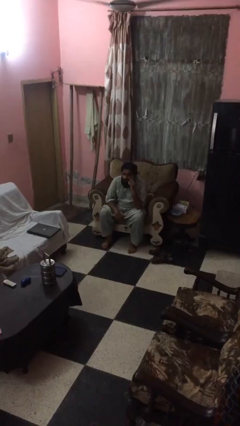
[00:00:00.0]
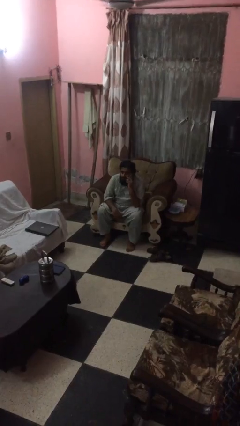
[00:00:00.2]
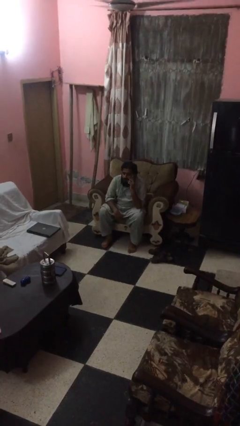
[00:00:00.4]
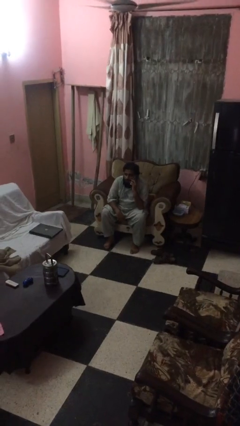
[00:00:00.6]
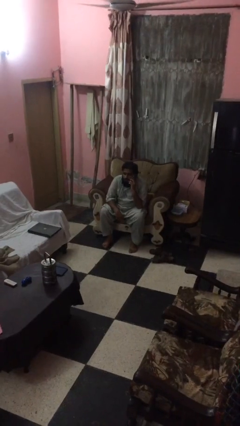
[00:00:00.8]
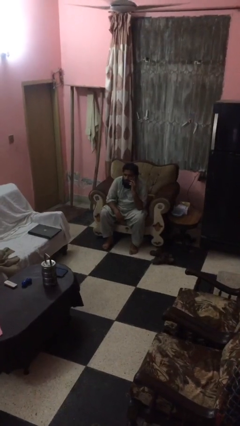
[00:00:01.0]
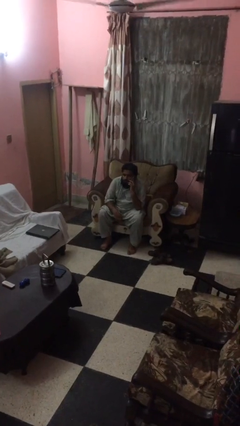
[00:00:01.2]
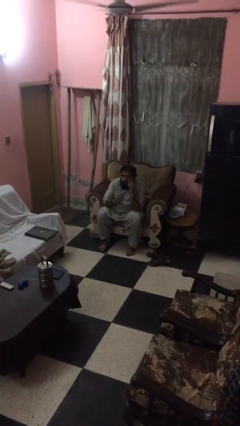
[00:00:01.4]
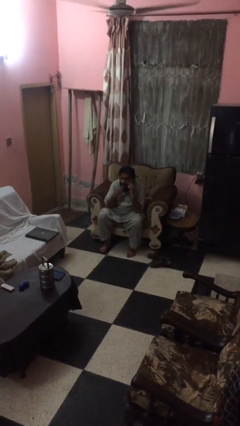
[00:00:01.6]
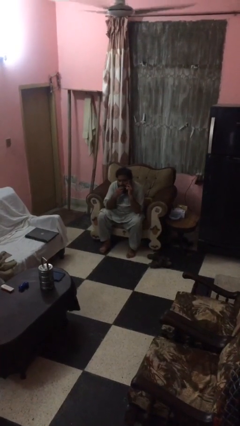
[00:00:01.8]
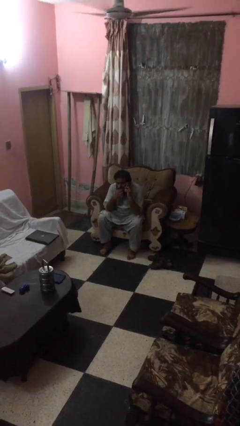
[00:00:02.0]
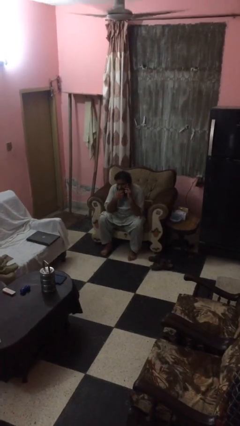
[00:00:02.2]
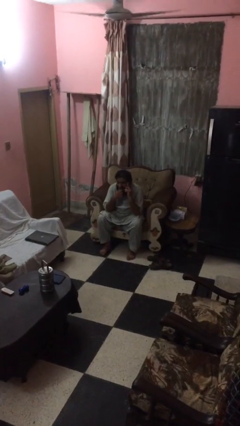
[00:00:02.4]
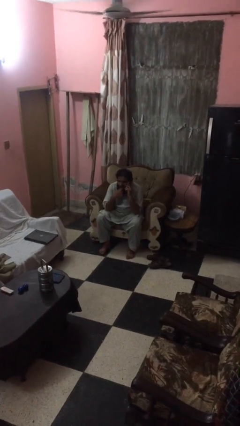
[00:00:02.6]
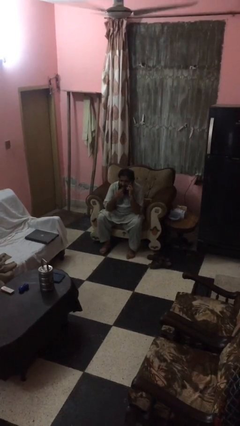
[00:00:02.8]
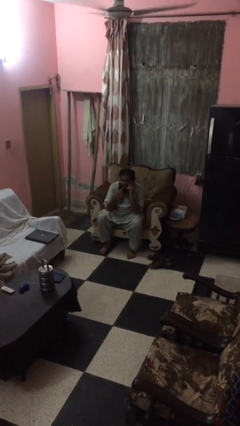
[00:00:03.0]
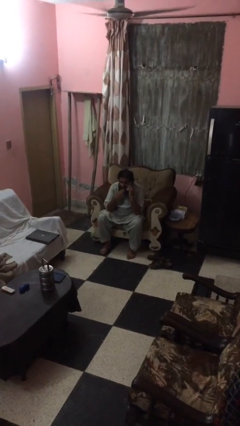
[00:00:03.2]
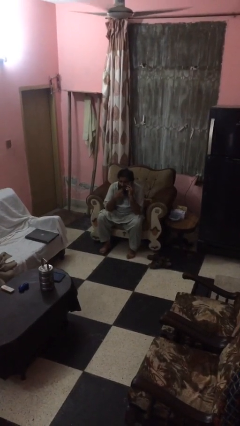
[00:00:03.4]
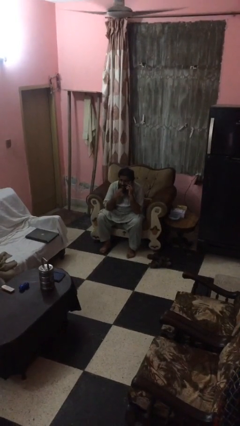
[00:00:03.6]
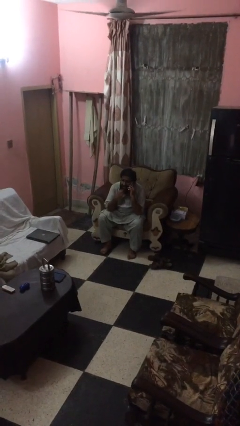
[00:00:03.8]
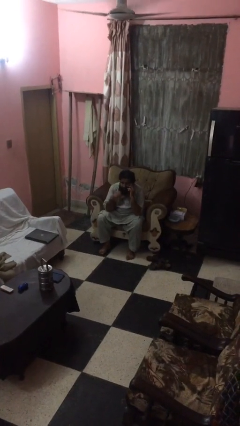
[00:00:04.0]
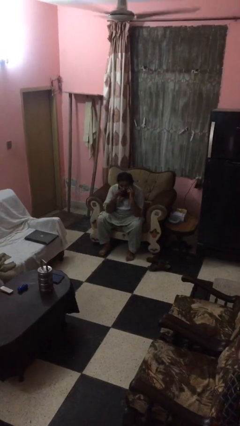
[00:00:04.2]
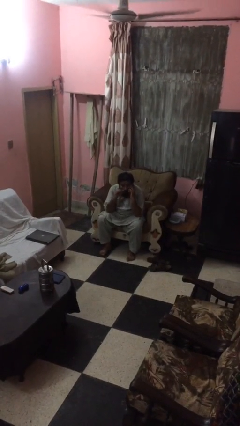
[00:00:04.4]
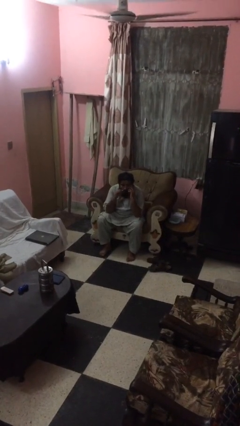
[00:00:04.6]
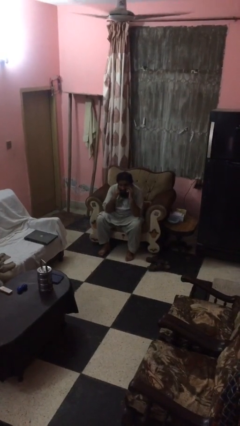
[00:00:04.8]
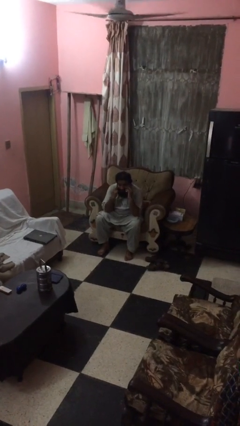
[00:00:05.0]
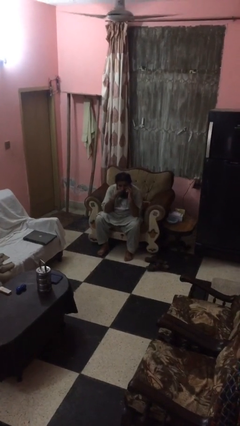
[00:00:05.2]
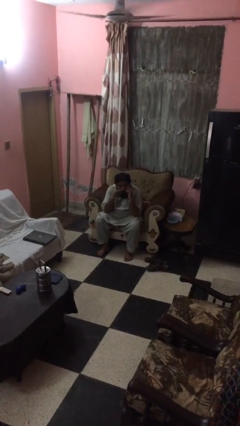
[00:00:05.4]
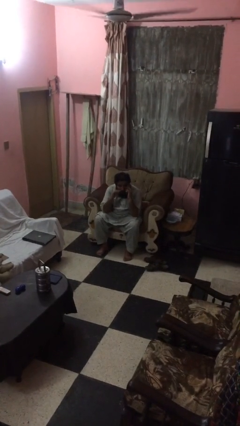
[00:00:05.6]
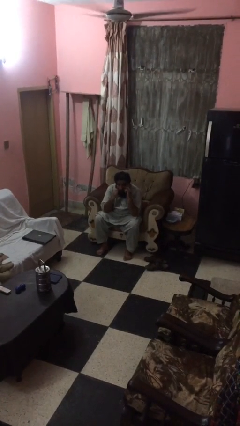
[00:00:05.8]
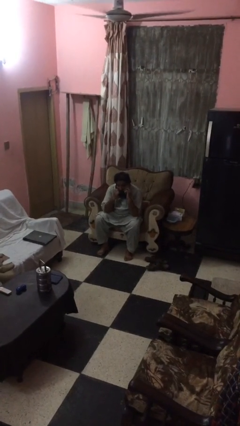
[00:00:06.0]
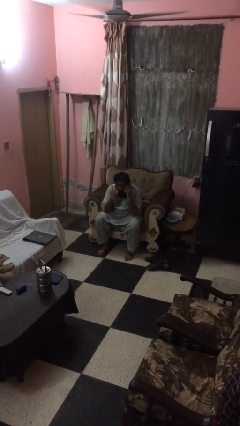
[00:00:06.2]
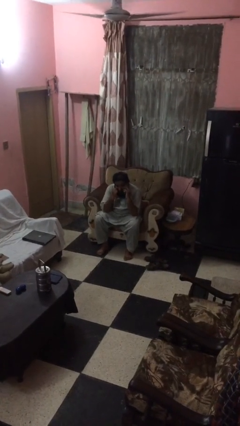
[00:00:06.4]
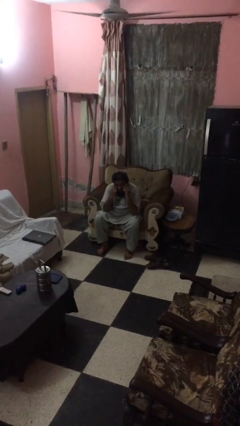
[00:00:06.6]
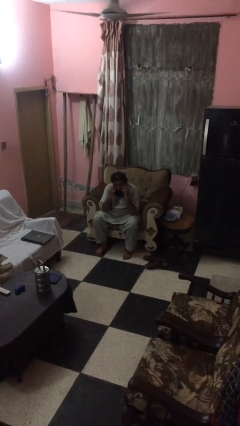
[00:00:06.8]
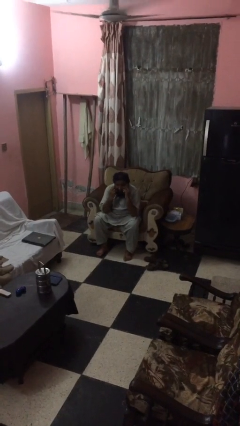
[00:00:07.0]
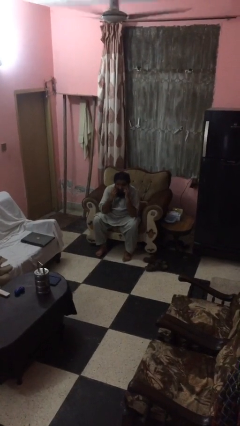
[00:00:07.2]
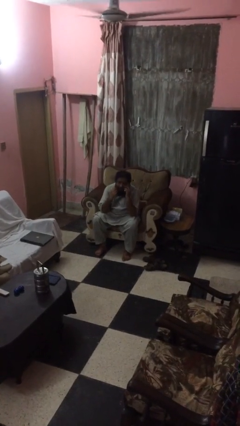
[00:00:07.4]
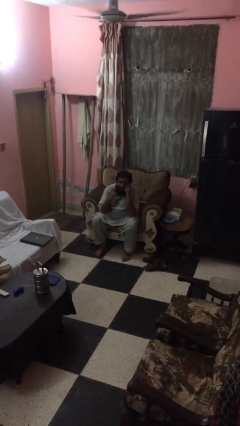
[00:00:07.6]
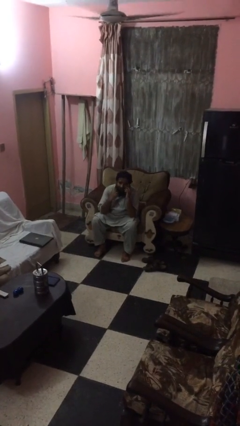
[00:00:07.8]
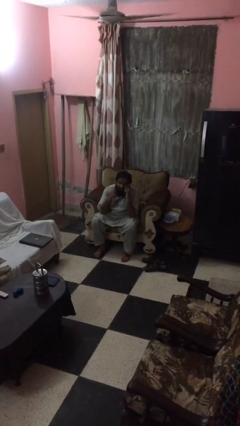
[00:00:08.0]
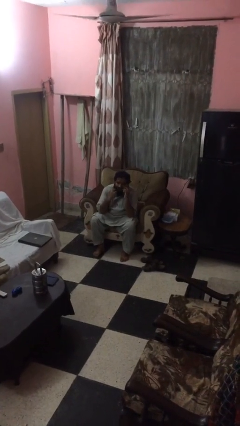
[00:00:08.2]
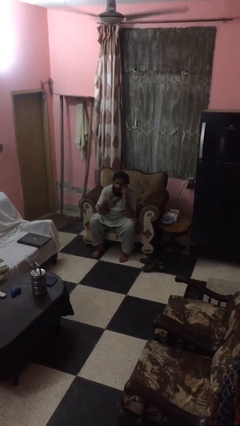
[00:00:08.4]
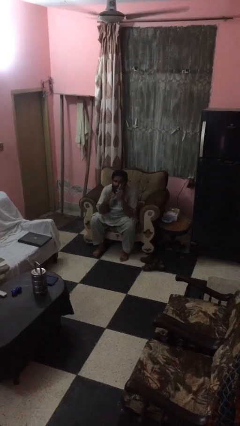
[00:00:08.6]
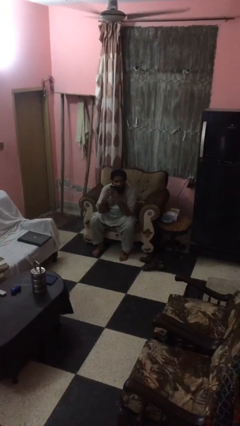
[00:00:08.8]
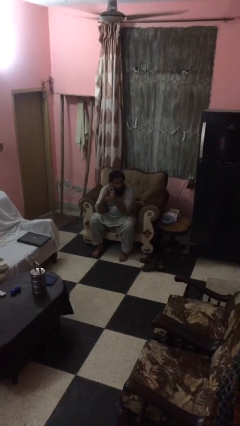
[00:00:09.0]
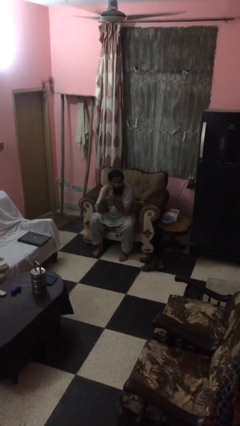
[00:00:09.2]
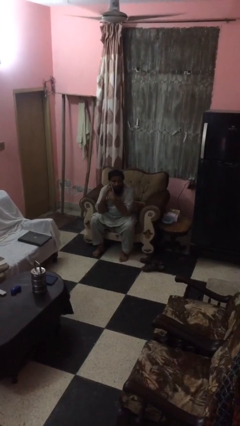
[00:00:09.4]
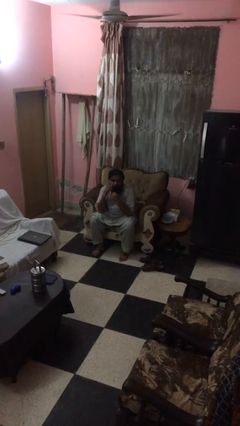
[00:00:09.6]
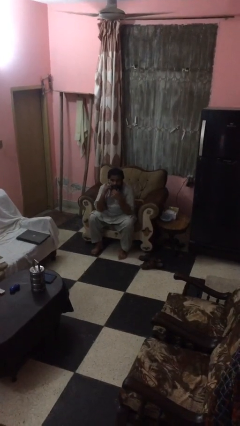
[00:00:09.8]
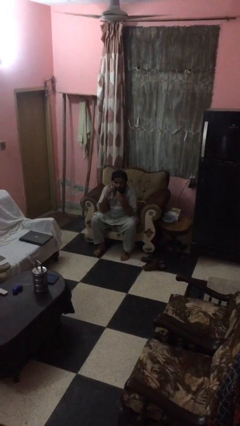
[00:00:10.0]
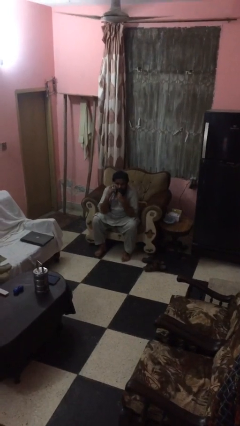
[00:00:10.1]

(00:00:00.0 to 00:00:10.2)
person talks on phone

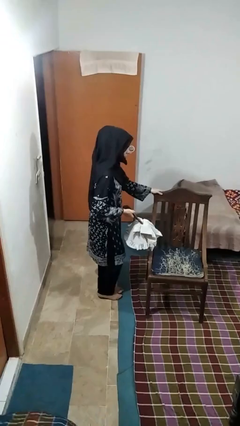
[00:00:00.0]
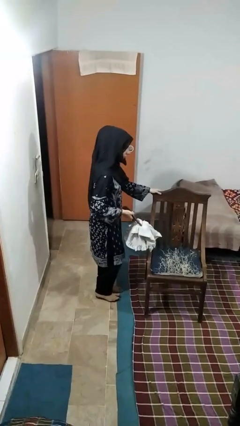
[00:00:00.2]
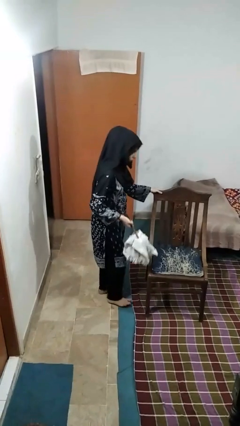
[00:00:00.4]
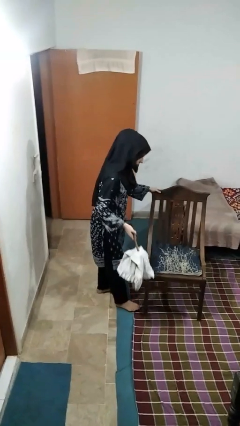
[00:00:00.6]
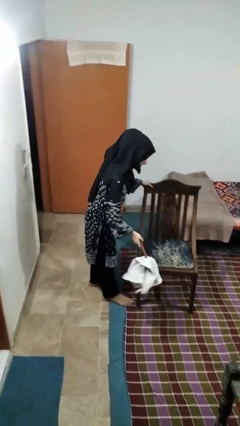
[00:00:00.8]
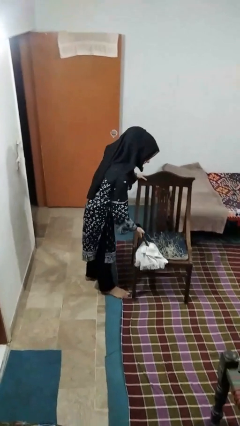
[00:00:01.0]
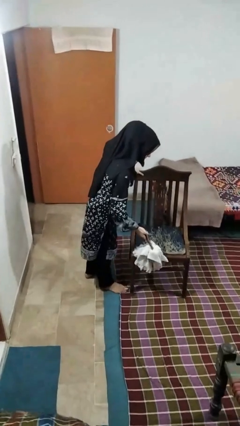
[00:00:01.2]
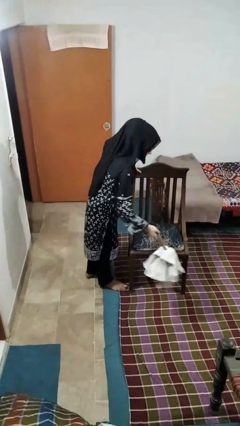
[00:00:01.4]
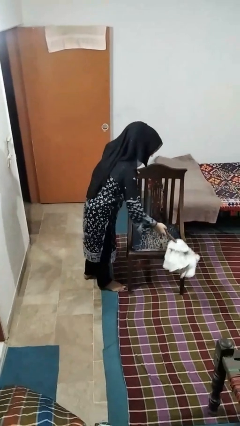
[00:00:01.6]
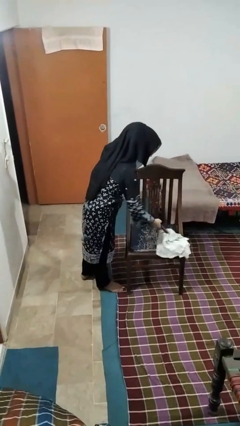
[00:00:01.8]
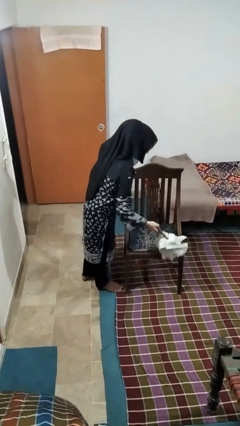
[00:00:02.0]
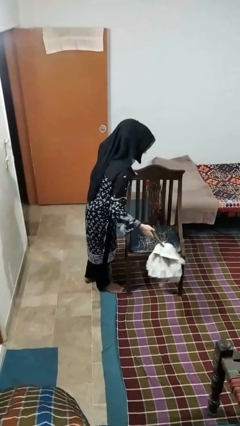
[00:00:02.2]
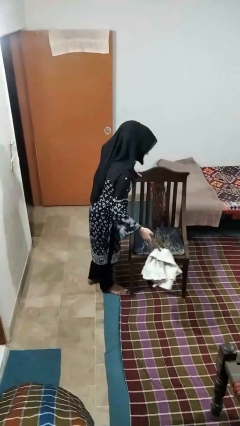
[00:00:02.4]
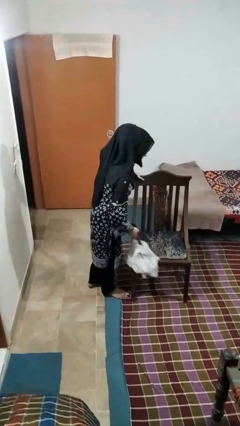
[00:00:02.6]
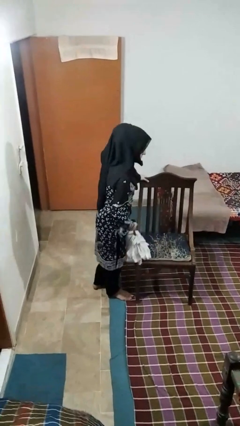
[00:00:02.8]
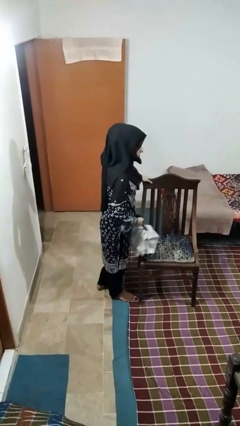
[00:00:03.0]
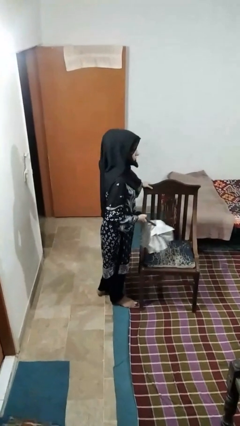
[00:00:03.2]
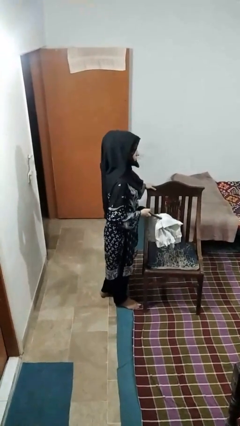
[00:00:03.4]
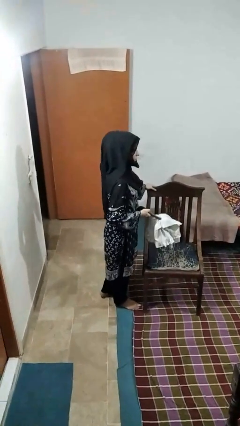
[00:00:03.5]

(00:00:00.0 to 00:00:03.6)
person dusts furniture

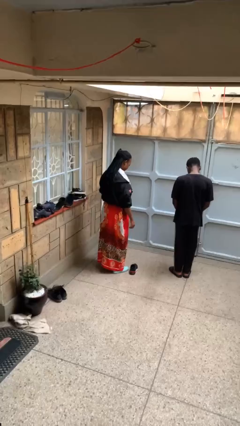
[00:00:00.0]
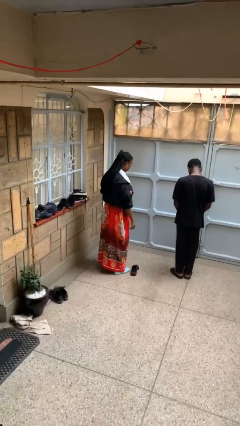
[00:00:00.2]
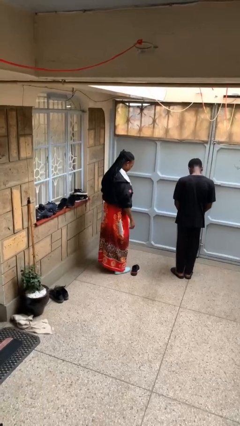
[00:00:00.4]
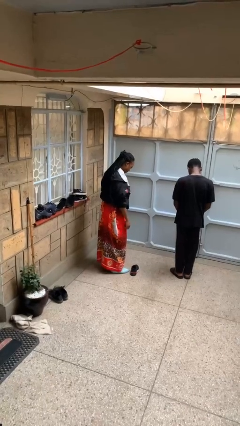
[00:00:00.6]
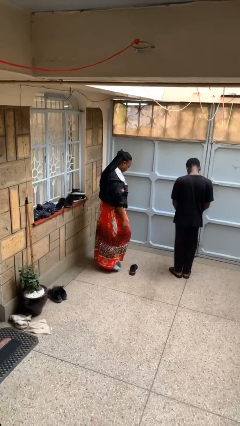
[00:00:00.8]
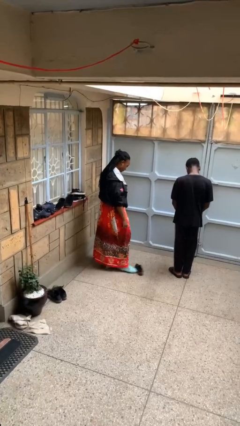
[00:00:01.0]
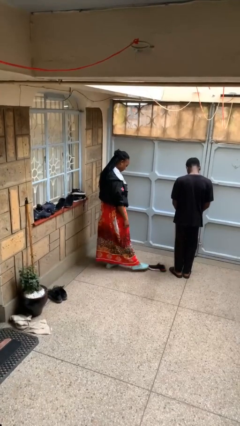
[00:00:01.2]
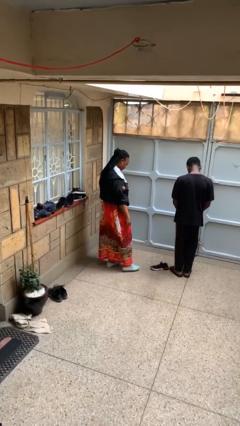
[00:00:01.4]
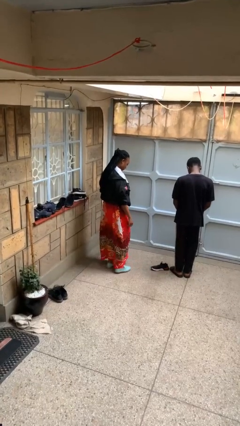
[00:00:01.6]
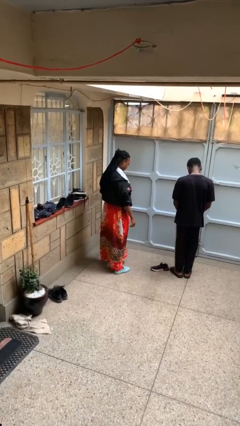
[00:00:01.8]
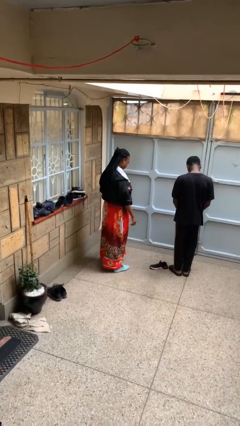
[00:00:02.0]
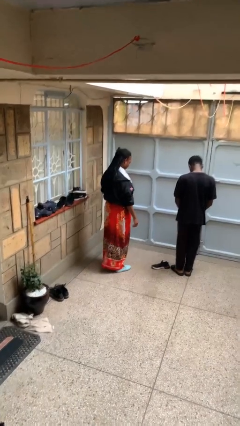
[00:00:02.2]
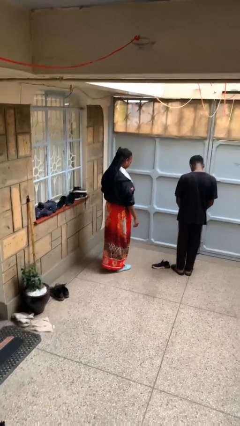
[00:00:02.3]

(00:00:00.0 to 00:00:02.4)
person kicks object to person

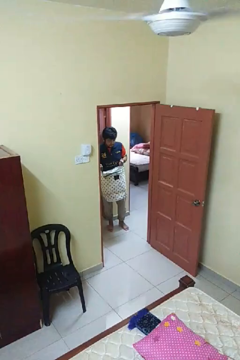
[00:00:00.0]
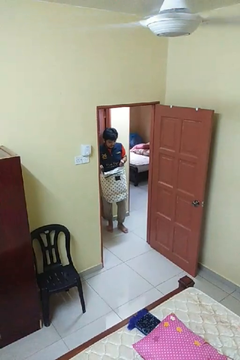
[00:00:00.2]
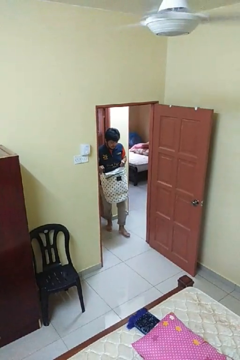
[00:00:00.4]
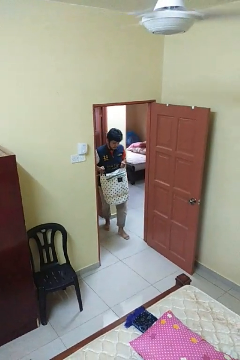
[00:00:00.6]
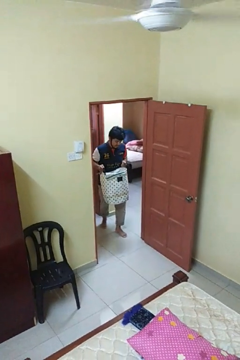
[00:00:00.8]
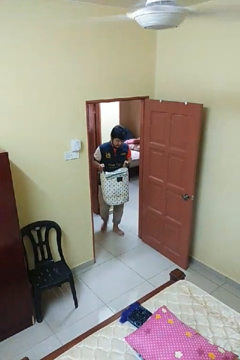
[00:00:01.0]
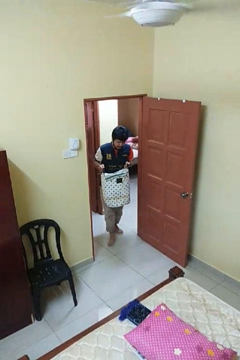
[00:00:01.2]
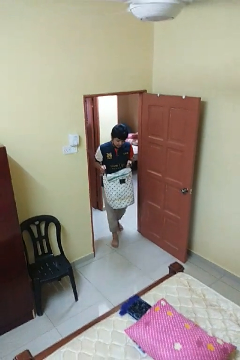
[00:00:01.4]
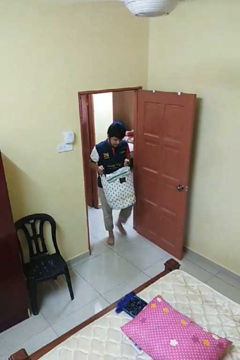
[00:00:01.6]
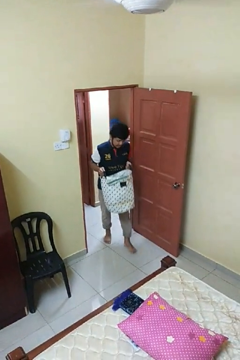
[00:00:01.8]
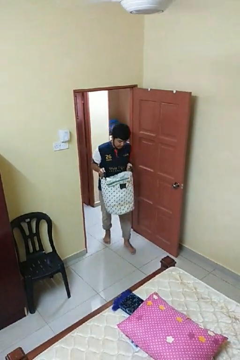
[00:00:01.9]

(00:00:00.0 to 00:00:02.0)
person carries laundry basket
